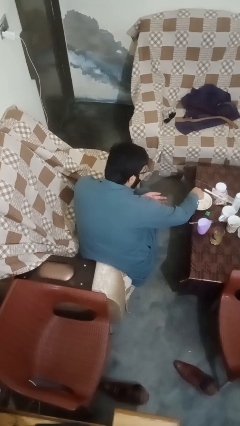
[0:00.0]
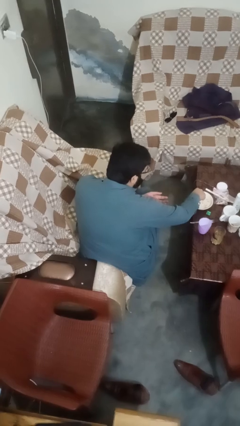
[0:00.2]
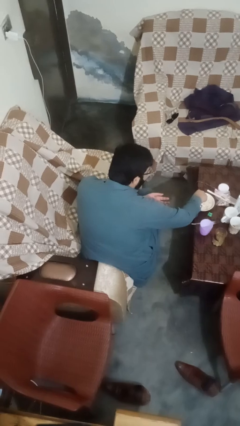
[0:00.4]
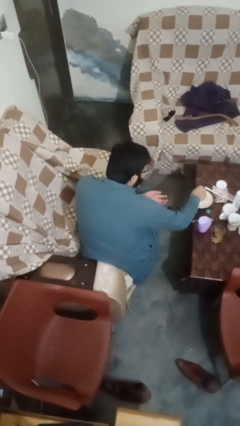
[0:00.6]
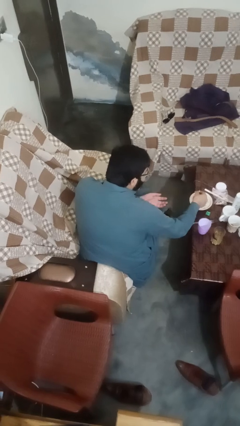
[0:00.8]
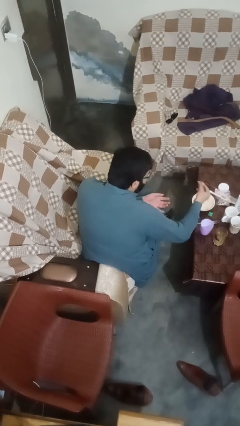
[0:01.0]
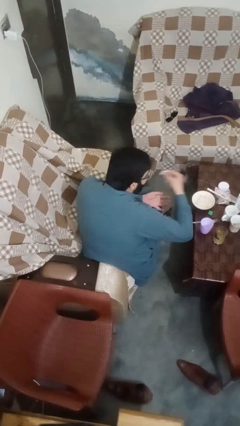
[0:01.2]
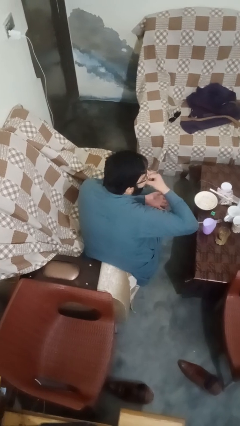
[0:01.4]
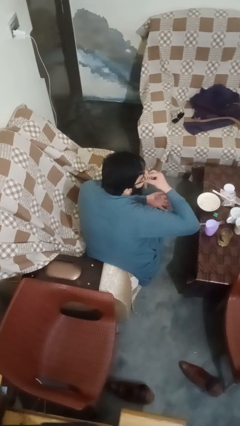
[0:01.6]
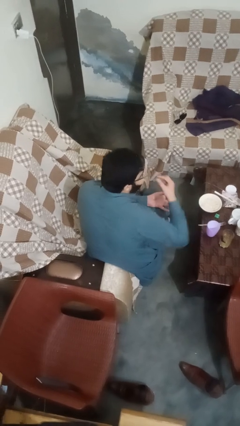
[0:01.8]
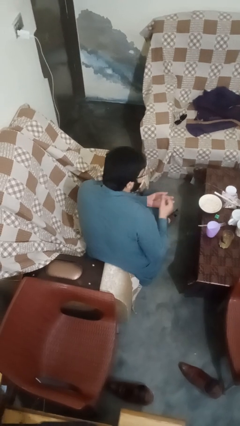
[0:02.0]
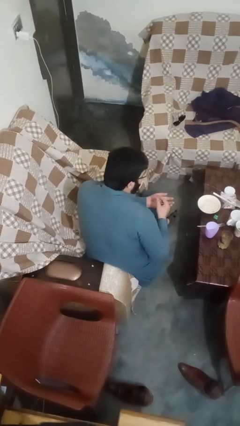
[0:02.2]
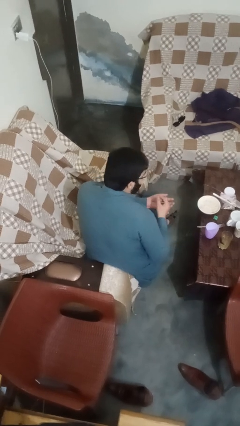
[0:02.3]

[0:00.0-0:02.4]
person eats with hands

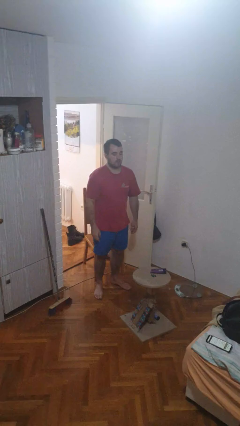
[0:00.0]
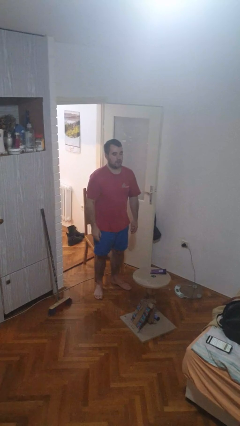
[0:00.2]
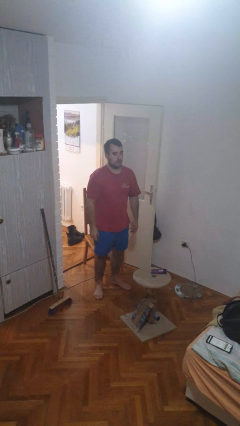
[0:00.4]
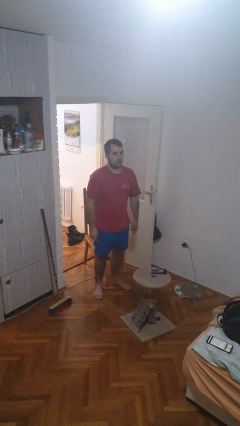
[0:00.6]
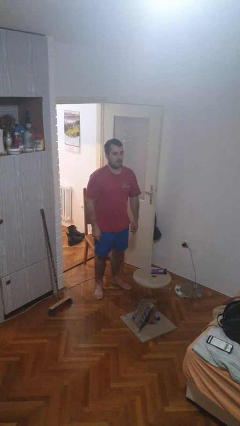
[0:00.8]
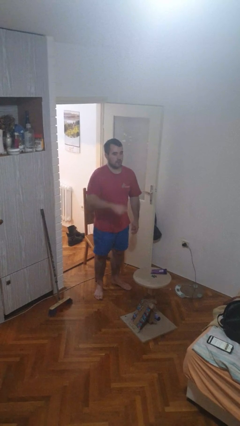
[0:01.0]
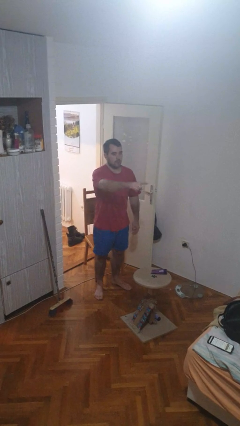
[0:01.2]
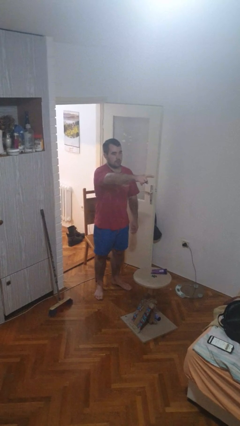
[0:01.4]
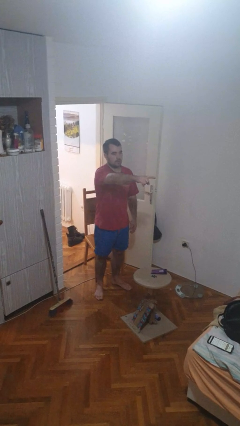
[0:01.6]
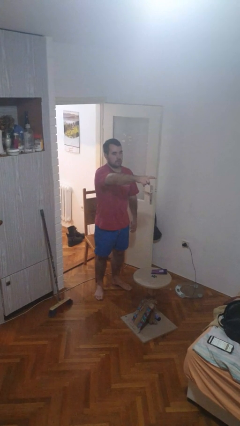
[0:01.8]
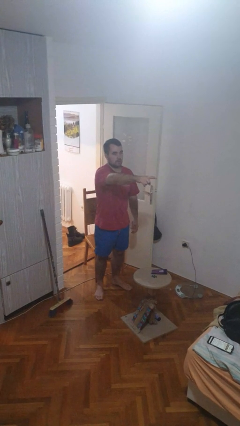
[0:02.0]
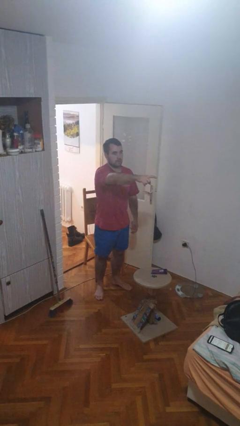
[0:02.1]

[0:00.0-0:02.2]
person points at person

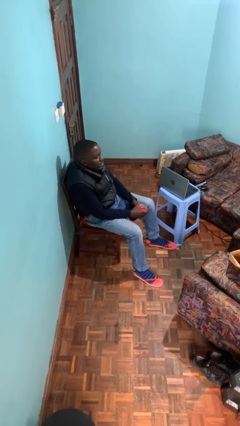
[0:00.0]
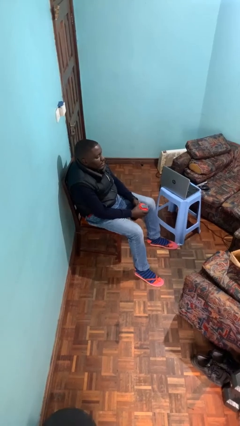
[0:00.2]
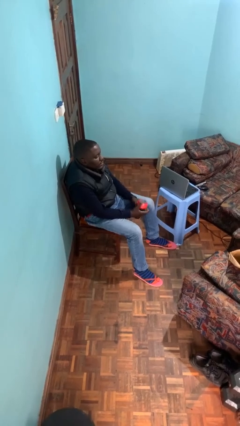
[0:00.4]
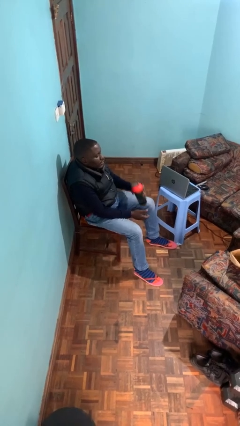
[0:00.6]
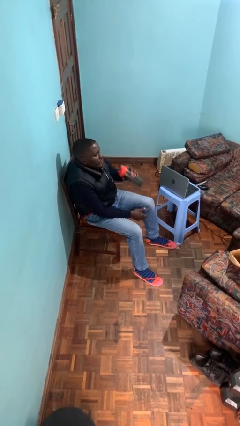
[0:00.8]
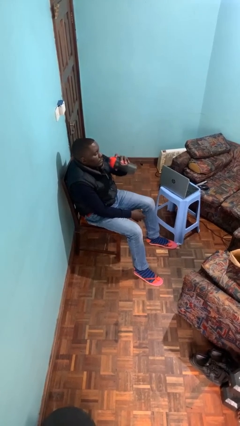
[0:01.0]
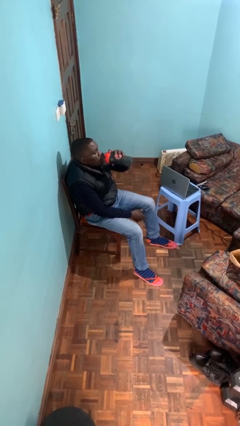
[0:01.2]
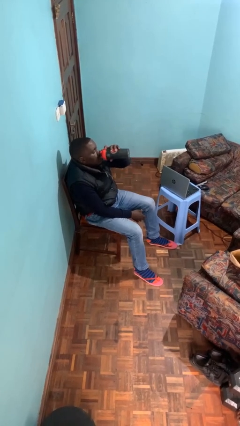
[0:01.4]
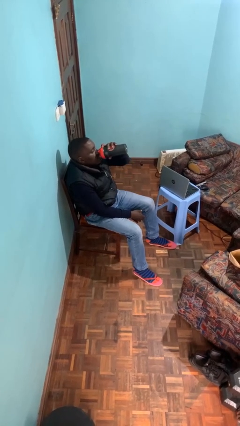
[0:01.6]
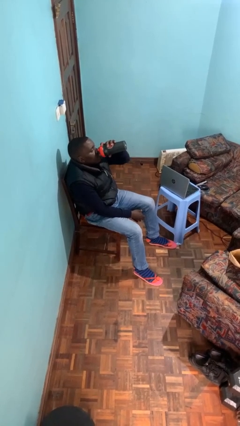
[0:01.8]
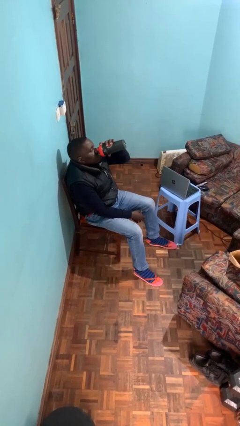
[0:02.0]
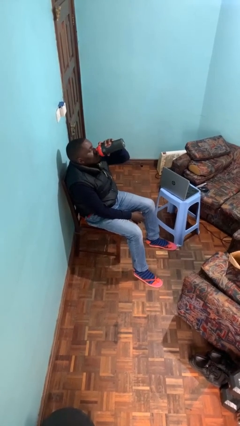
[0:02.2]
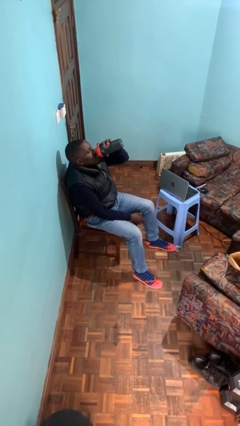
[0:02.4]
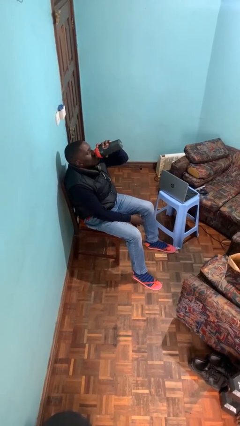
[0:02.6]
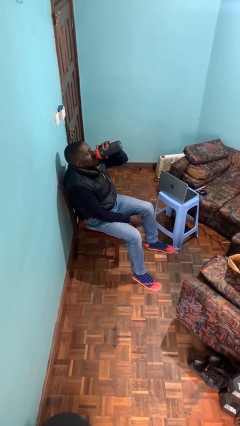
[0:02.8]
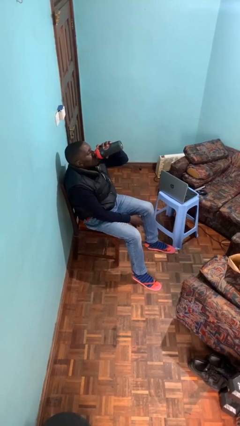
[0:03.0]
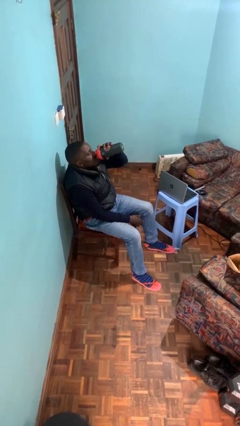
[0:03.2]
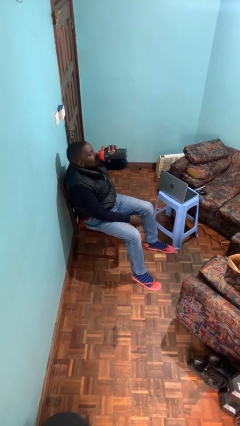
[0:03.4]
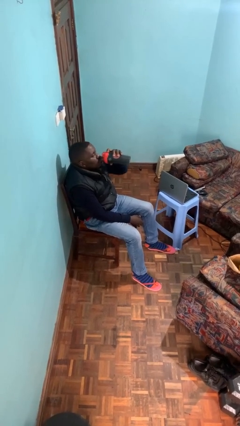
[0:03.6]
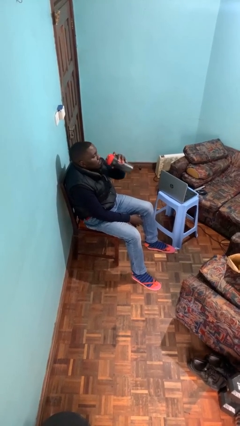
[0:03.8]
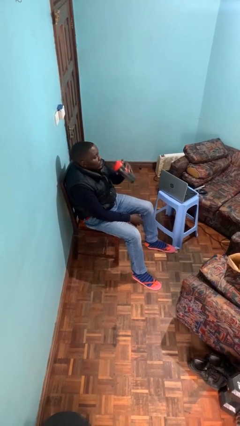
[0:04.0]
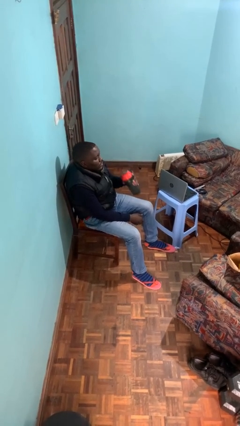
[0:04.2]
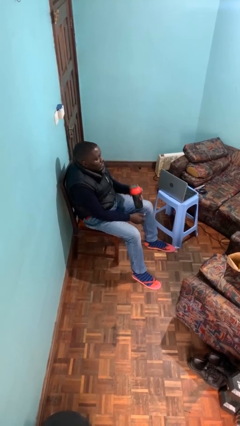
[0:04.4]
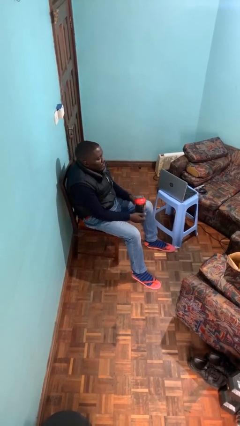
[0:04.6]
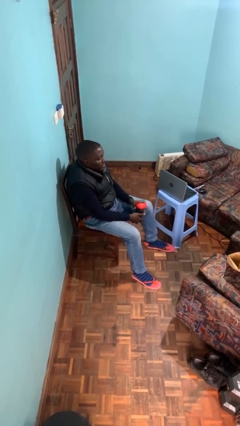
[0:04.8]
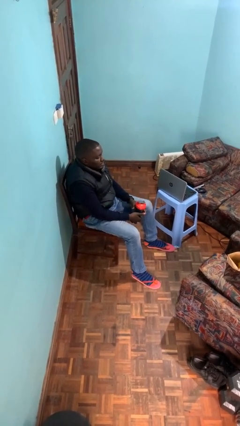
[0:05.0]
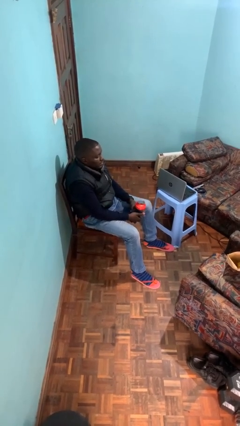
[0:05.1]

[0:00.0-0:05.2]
person drinks from bottle

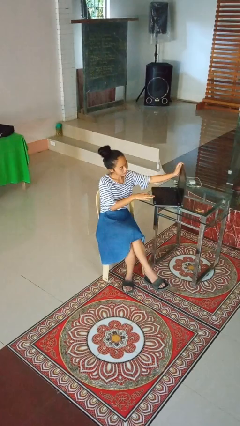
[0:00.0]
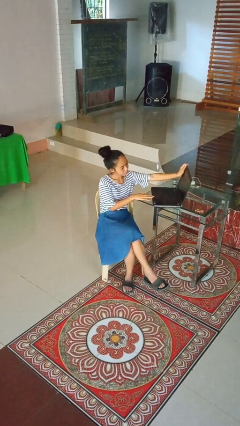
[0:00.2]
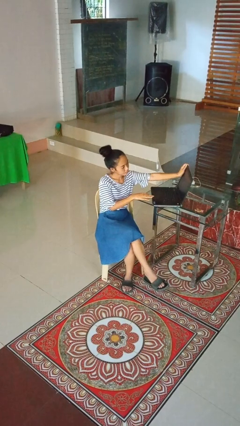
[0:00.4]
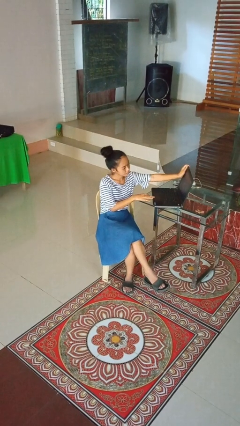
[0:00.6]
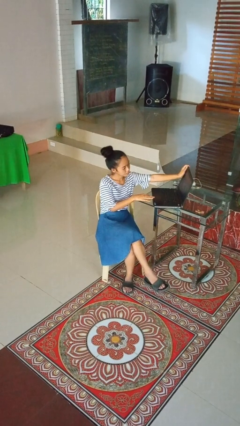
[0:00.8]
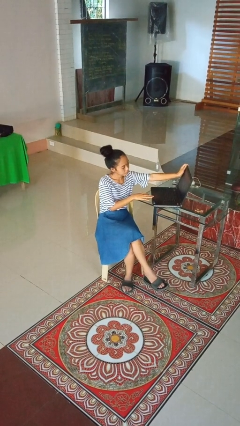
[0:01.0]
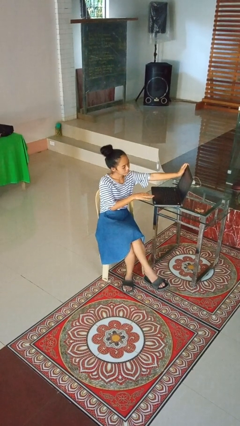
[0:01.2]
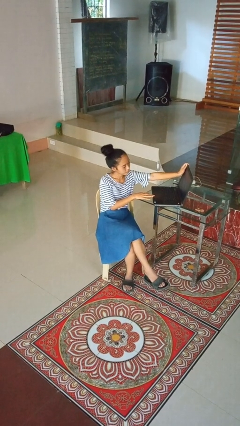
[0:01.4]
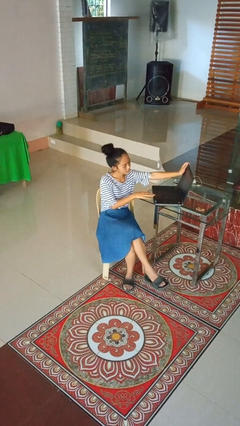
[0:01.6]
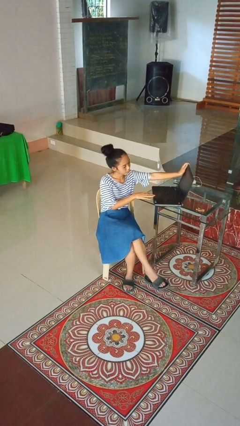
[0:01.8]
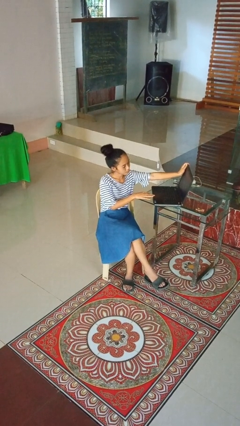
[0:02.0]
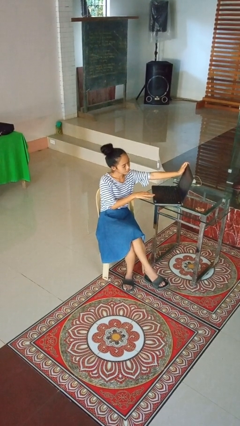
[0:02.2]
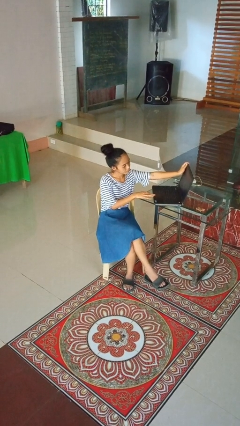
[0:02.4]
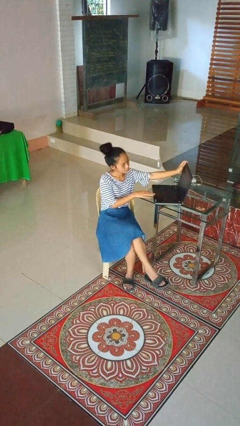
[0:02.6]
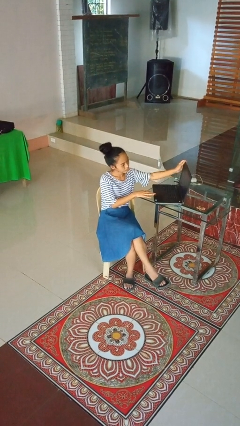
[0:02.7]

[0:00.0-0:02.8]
person opens laptop

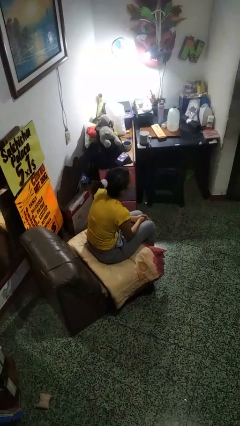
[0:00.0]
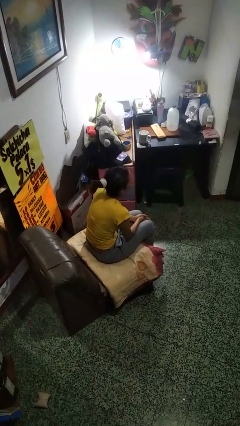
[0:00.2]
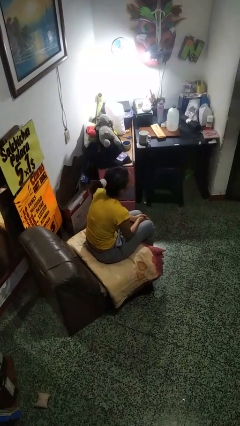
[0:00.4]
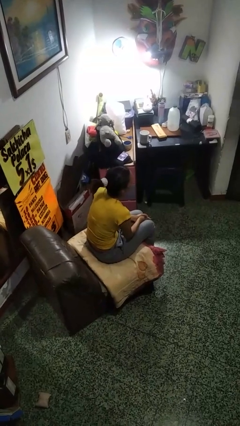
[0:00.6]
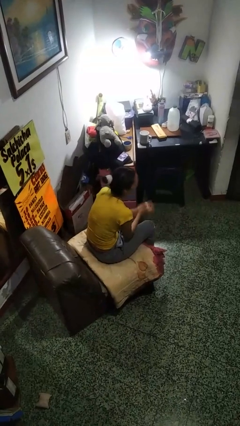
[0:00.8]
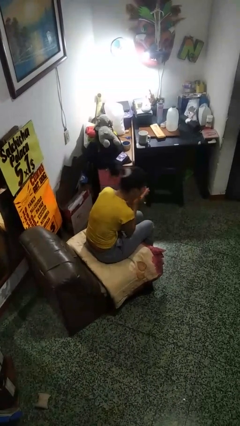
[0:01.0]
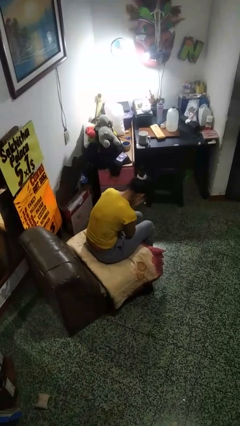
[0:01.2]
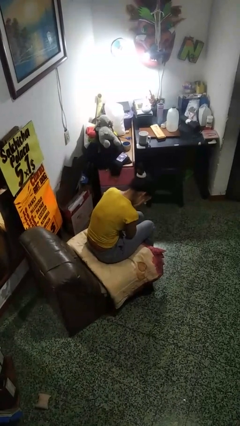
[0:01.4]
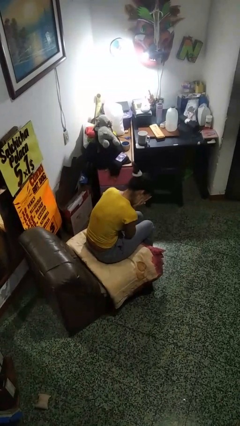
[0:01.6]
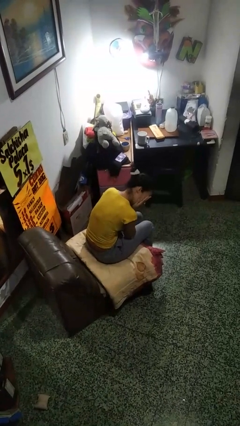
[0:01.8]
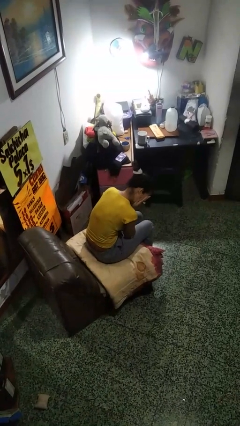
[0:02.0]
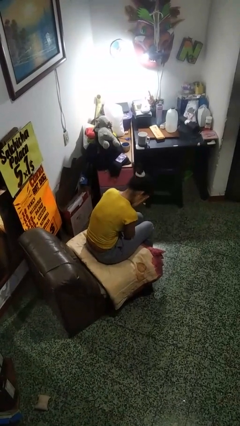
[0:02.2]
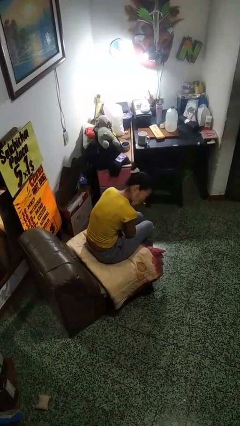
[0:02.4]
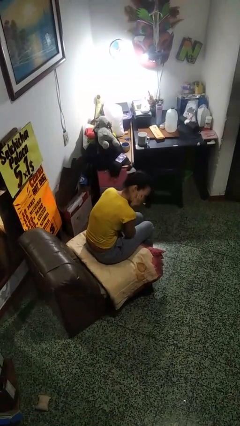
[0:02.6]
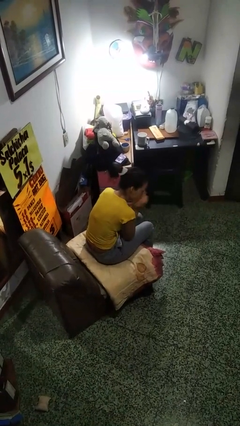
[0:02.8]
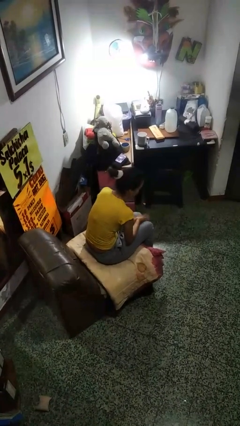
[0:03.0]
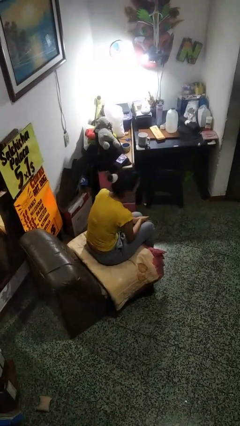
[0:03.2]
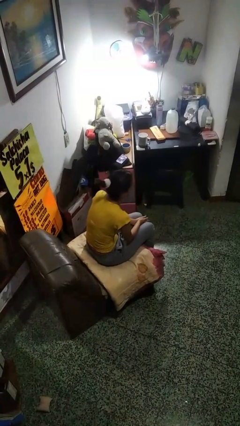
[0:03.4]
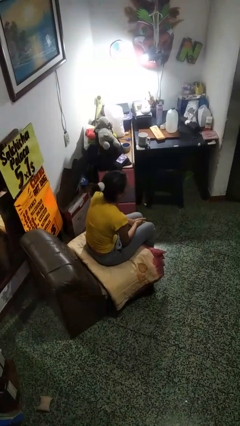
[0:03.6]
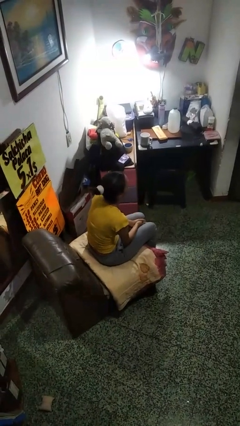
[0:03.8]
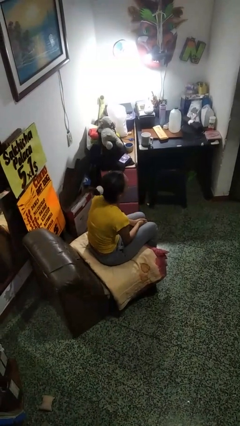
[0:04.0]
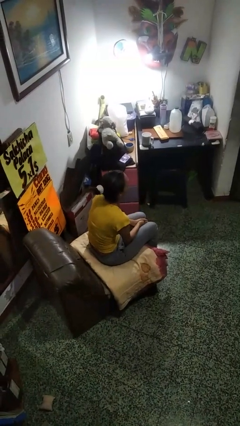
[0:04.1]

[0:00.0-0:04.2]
person covers face with hands

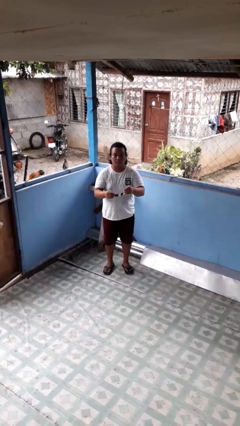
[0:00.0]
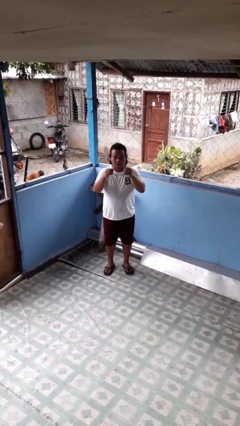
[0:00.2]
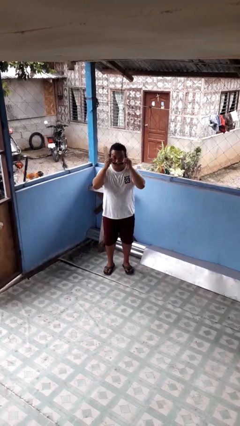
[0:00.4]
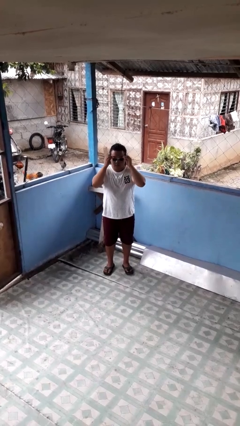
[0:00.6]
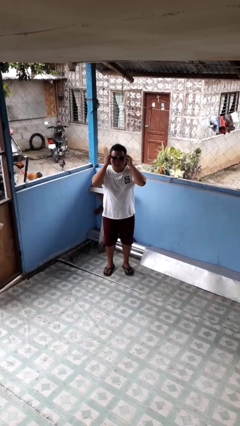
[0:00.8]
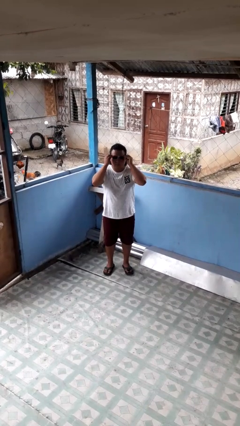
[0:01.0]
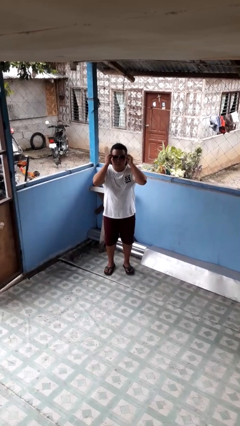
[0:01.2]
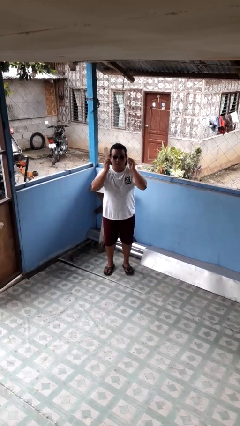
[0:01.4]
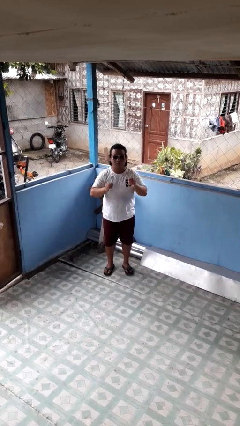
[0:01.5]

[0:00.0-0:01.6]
person puts on sunglasses
